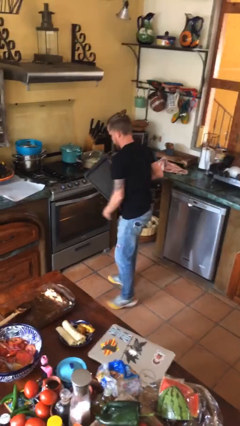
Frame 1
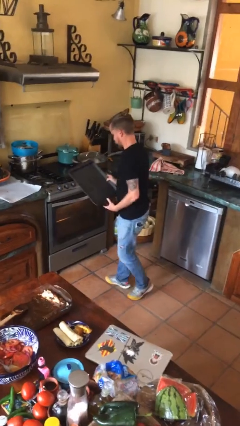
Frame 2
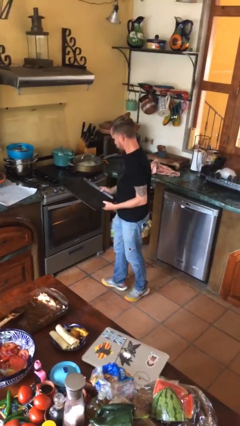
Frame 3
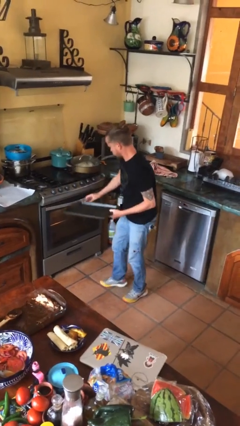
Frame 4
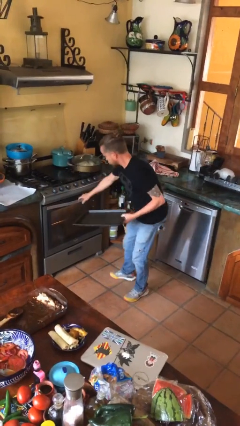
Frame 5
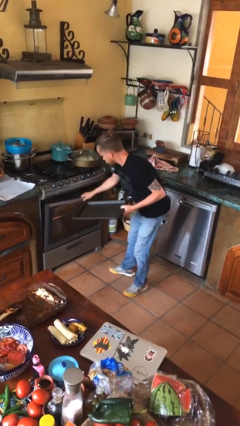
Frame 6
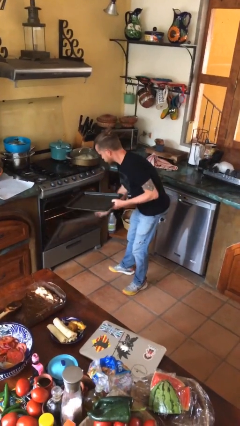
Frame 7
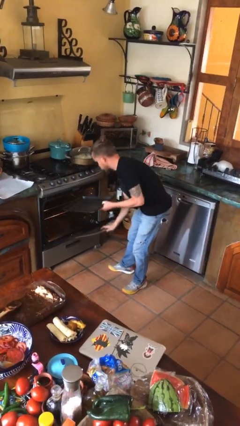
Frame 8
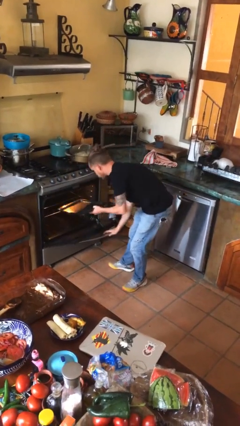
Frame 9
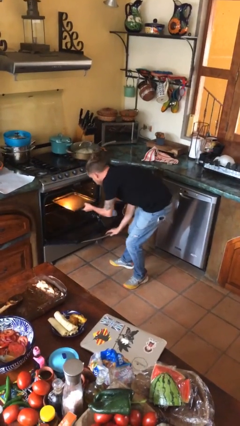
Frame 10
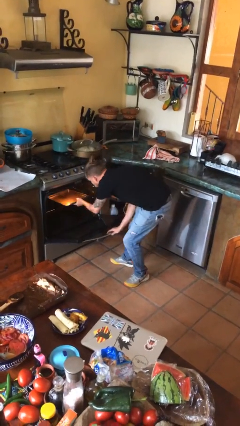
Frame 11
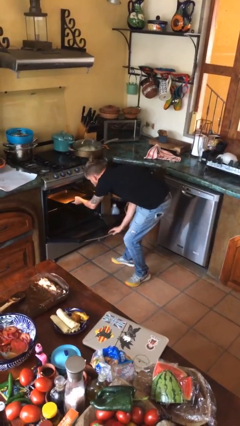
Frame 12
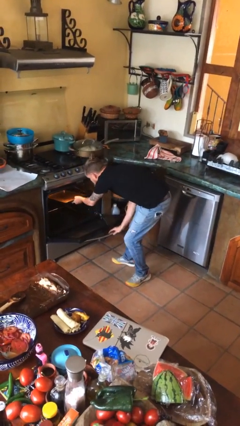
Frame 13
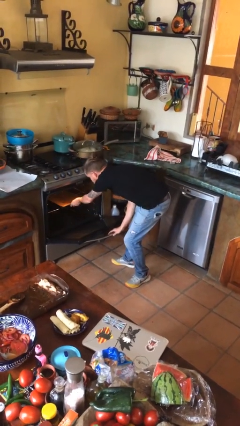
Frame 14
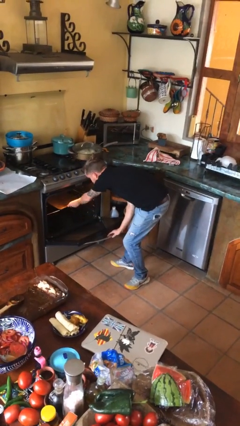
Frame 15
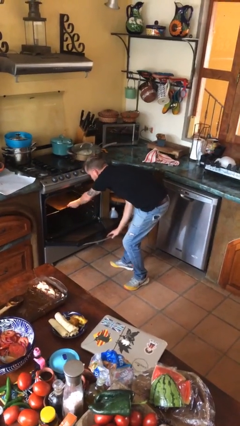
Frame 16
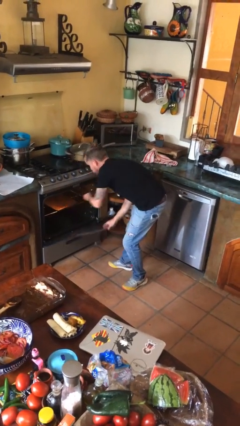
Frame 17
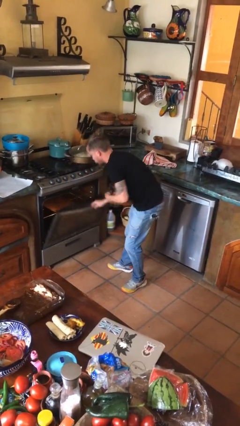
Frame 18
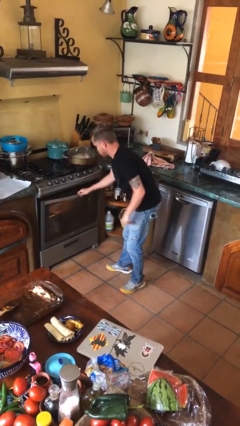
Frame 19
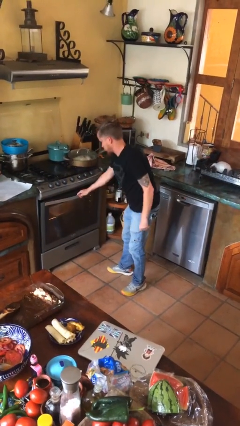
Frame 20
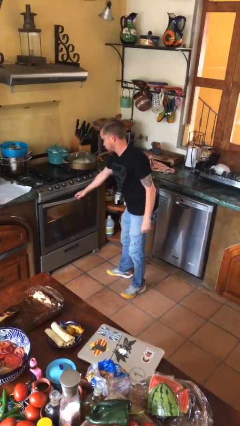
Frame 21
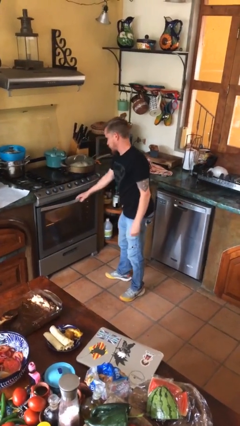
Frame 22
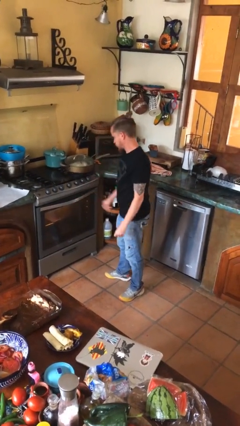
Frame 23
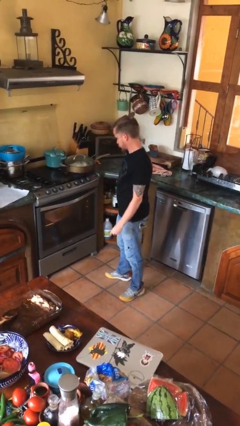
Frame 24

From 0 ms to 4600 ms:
person puts object into oven

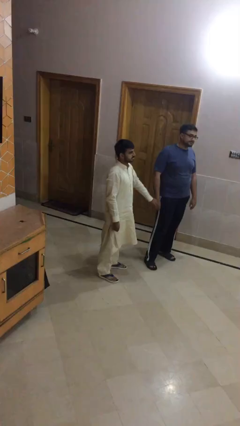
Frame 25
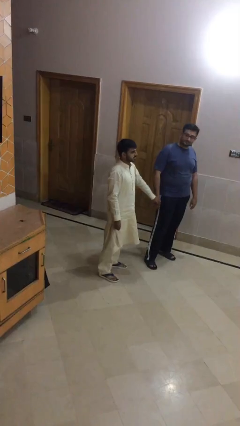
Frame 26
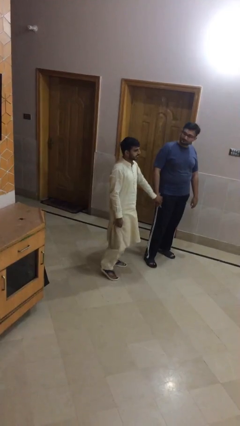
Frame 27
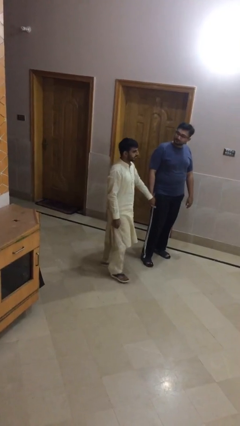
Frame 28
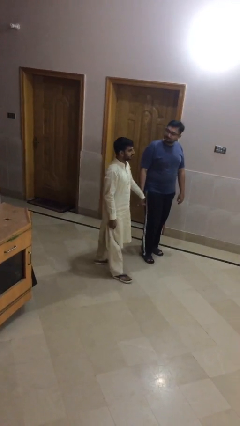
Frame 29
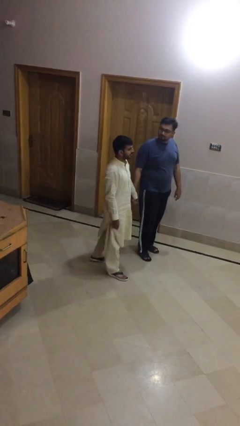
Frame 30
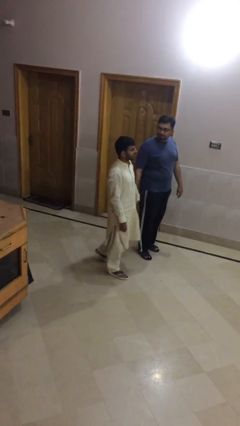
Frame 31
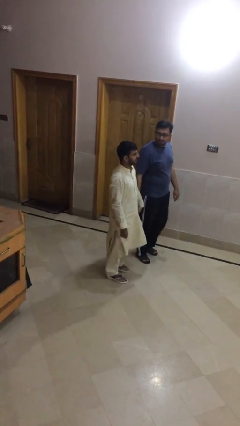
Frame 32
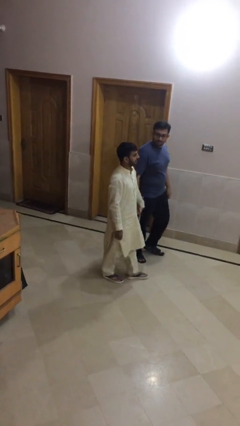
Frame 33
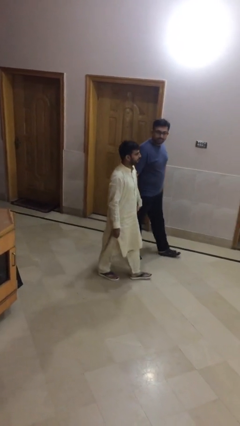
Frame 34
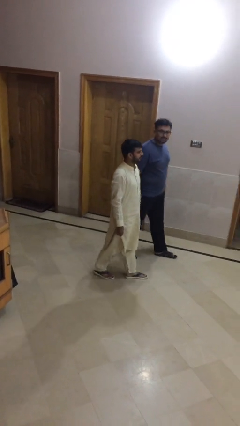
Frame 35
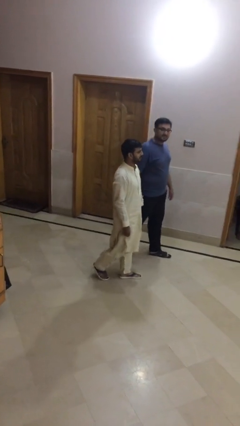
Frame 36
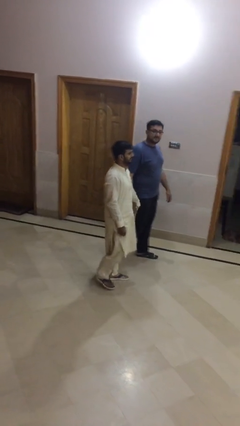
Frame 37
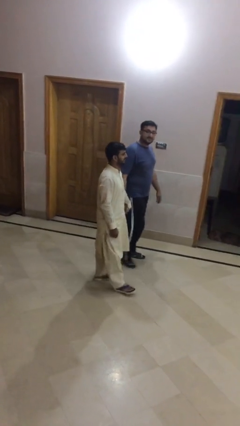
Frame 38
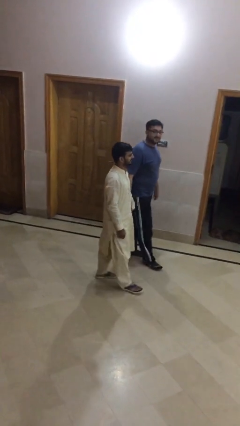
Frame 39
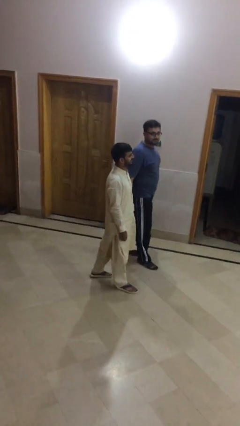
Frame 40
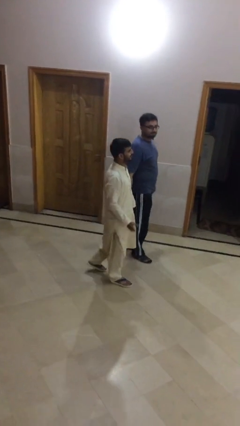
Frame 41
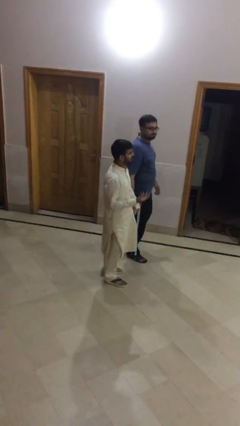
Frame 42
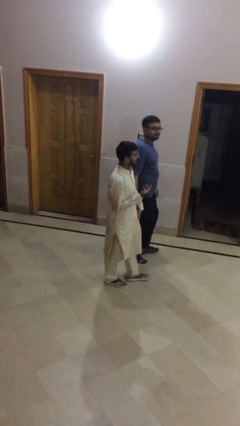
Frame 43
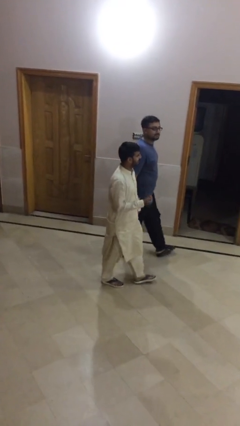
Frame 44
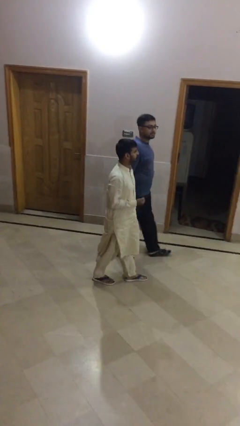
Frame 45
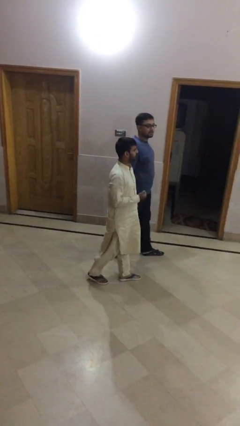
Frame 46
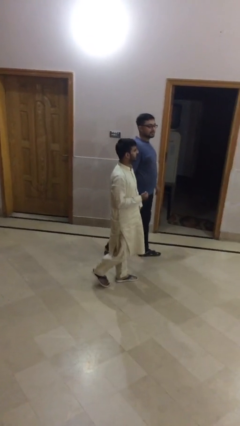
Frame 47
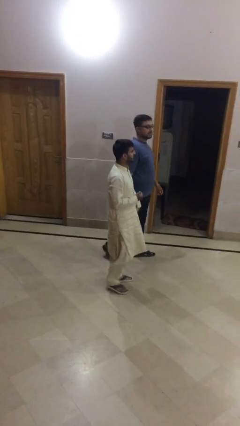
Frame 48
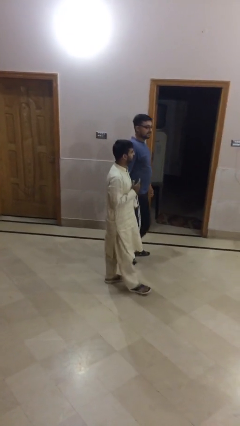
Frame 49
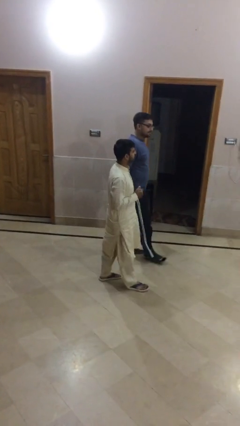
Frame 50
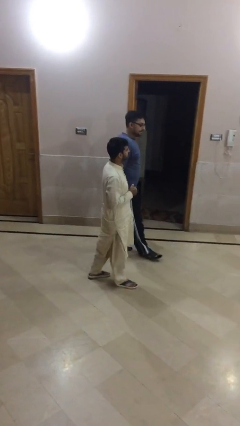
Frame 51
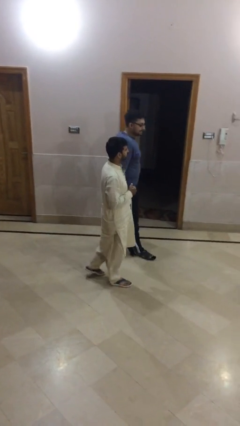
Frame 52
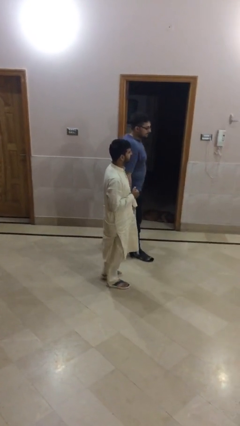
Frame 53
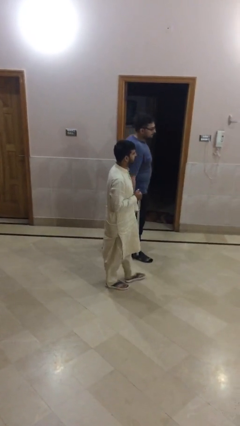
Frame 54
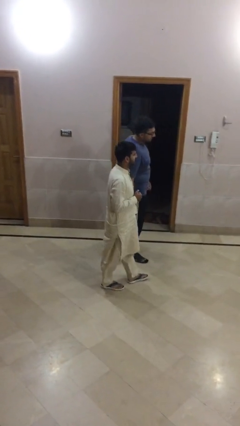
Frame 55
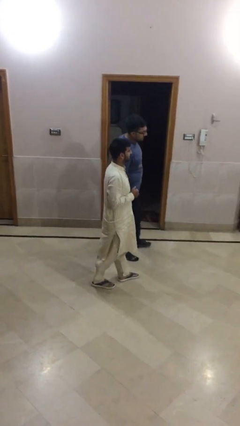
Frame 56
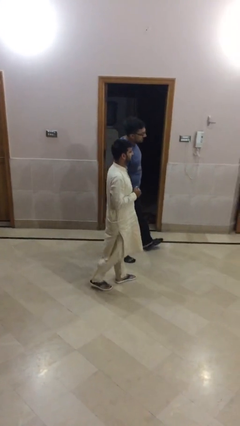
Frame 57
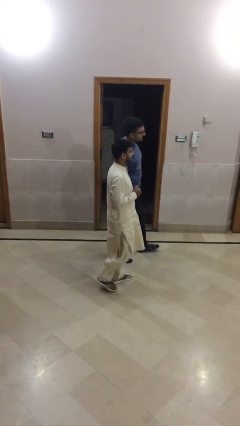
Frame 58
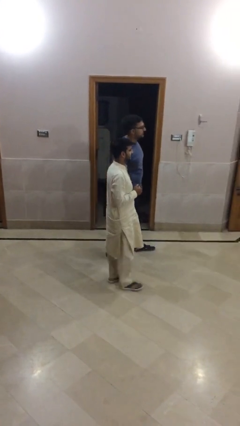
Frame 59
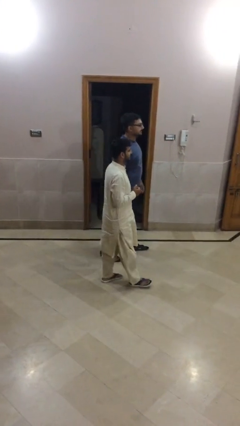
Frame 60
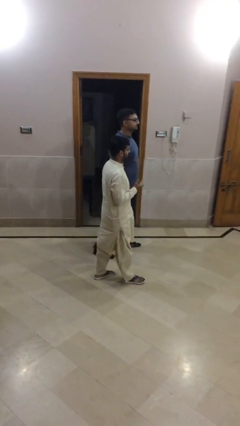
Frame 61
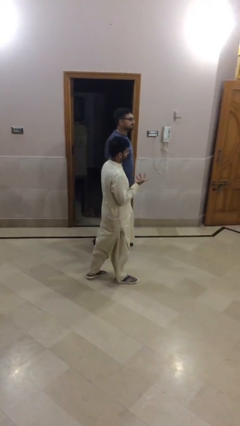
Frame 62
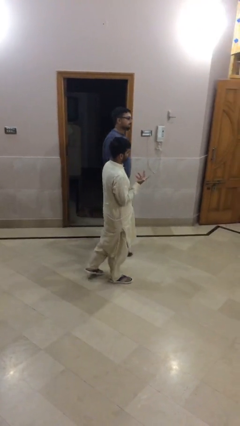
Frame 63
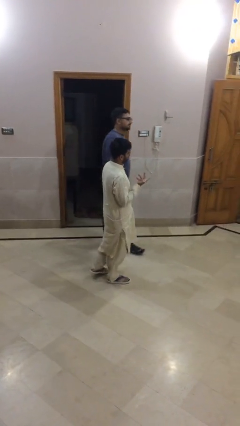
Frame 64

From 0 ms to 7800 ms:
person holds hand

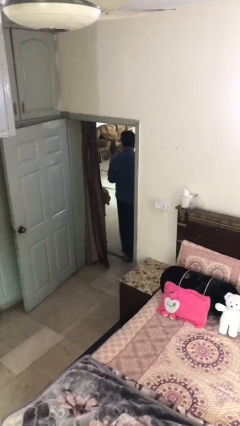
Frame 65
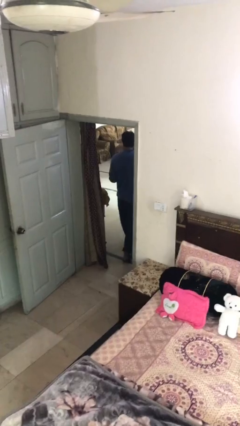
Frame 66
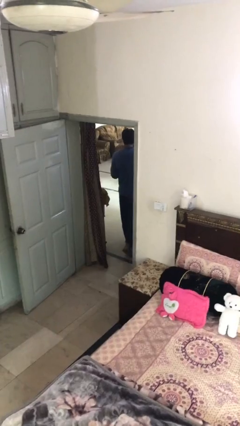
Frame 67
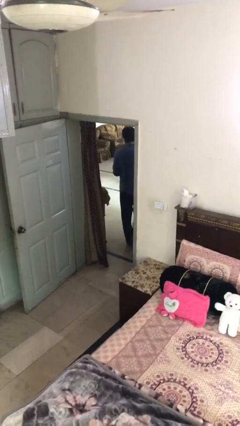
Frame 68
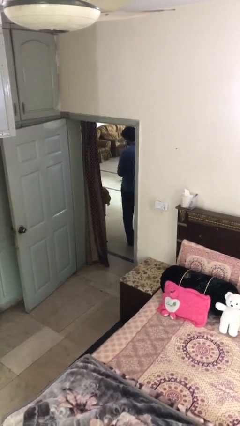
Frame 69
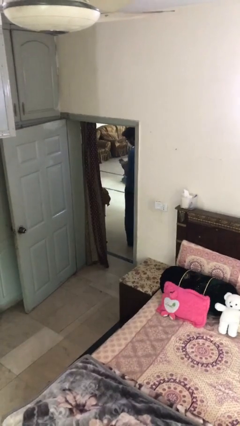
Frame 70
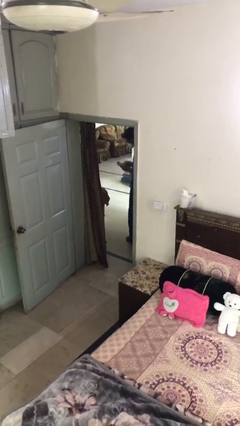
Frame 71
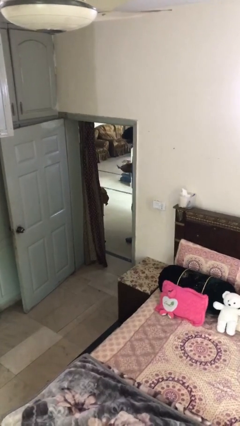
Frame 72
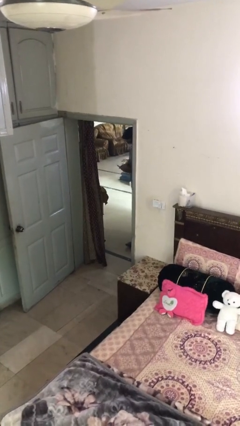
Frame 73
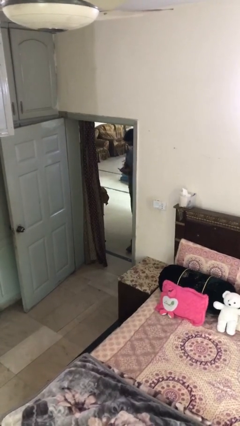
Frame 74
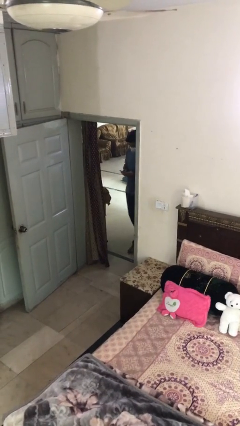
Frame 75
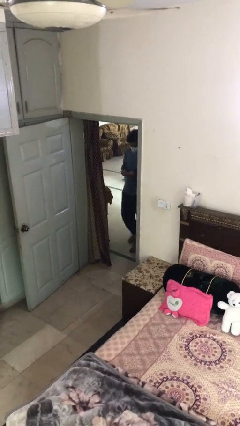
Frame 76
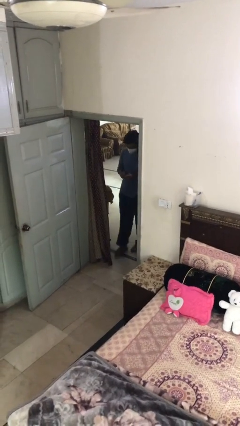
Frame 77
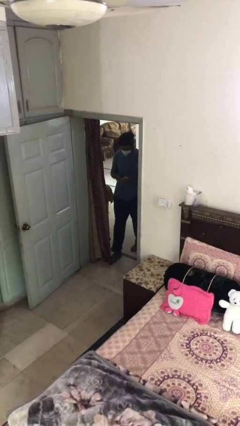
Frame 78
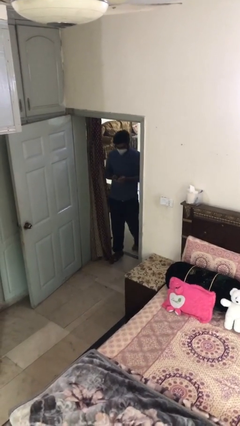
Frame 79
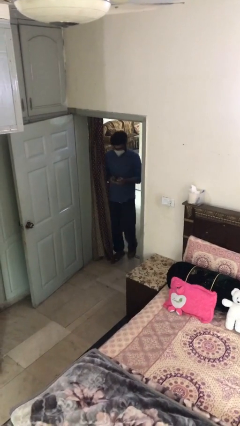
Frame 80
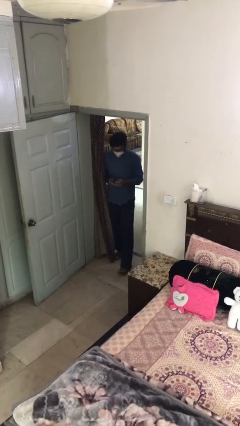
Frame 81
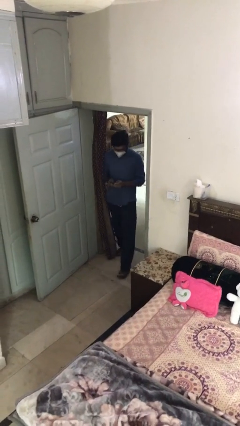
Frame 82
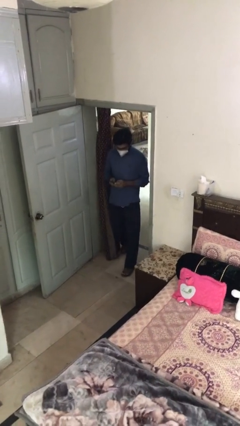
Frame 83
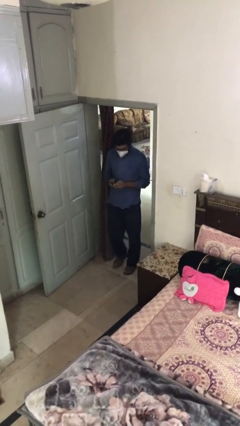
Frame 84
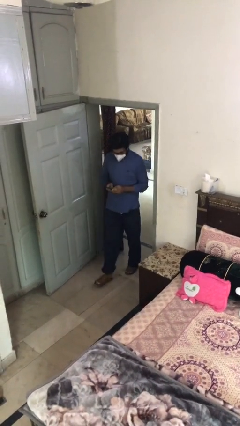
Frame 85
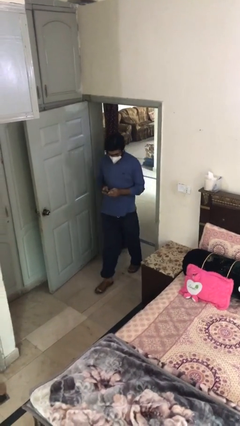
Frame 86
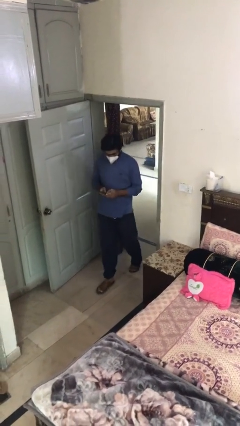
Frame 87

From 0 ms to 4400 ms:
person enters scene through structure

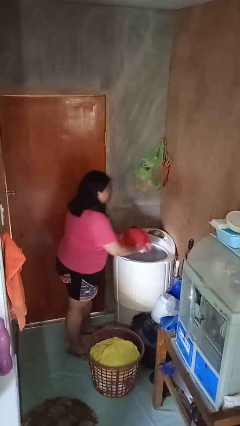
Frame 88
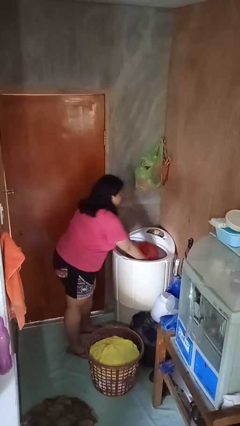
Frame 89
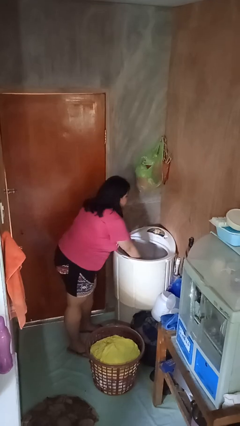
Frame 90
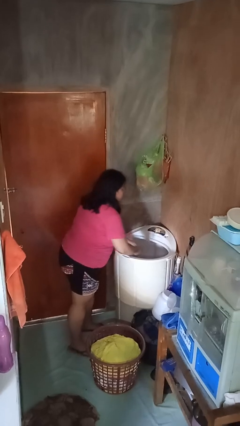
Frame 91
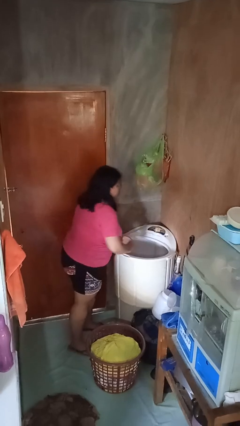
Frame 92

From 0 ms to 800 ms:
person loads clotheswasher

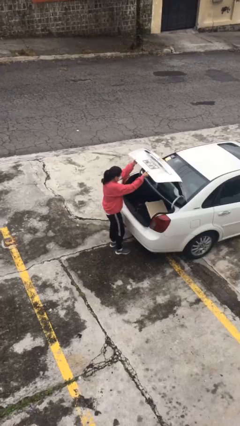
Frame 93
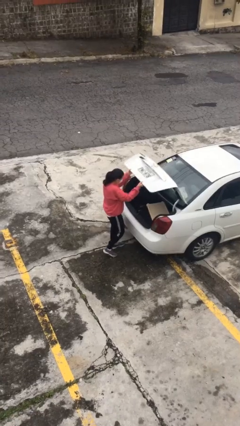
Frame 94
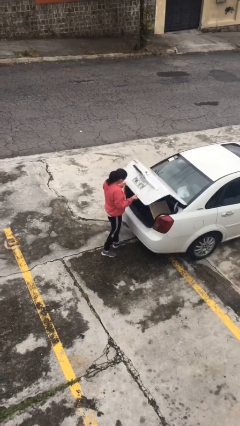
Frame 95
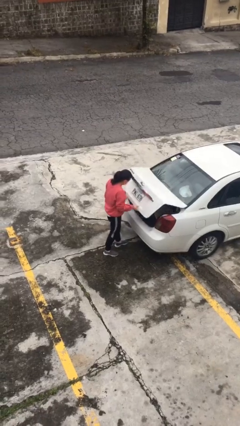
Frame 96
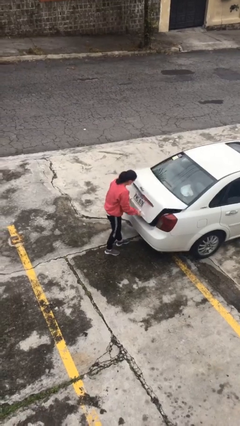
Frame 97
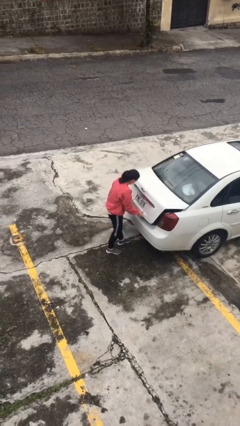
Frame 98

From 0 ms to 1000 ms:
person closes car trunk
